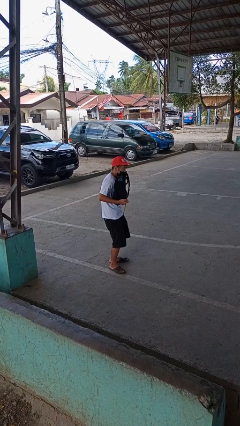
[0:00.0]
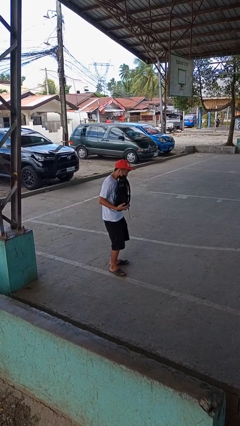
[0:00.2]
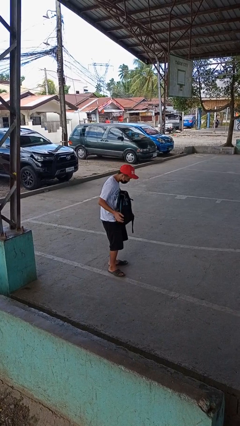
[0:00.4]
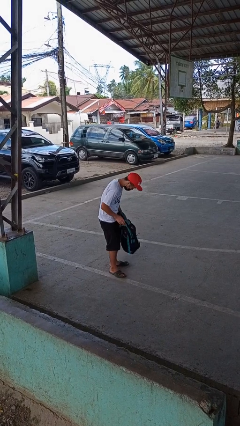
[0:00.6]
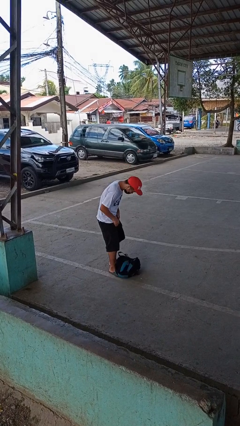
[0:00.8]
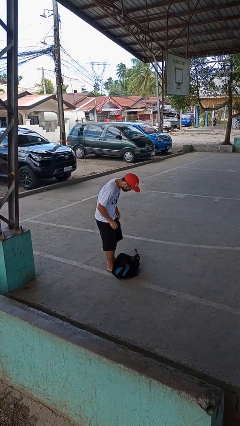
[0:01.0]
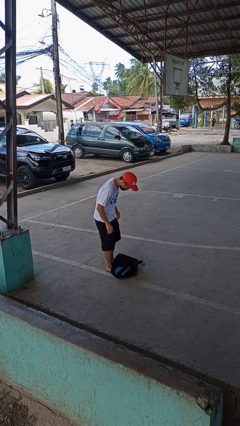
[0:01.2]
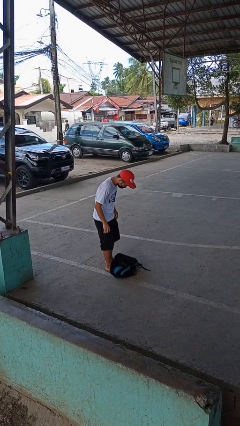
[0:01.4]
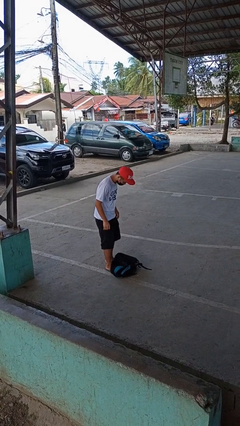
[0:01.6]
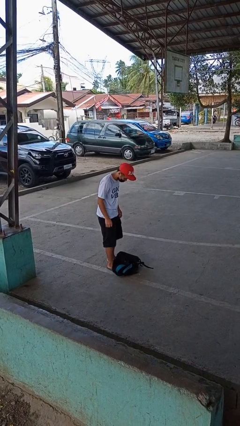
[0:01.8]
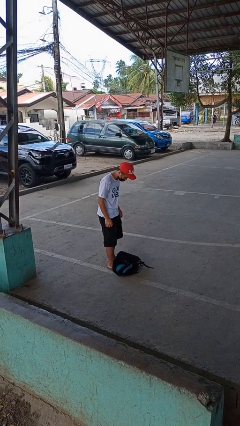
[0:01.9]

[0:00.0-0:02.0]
person drops object

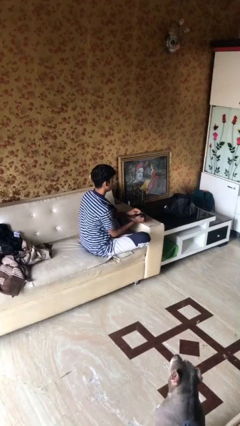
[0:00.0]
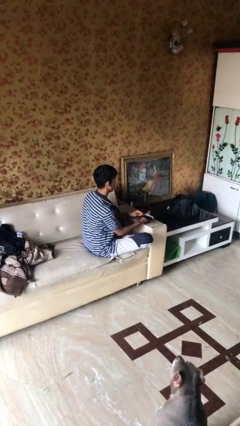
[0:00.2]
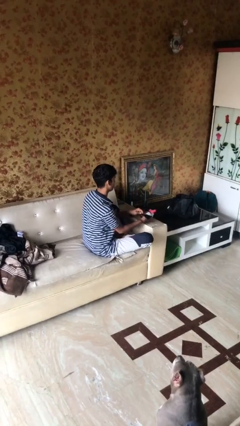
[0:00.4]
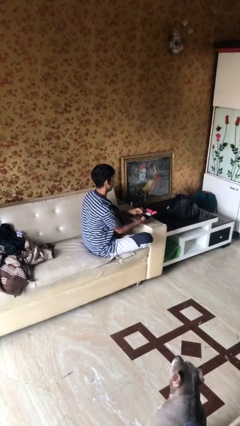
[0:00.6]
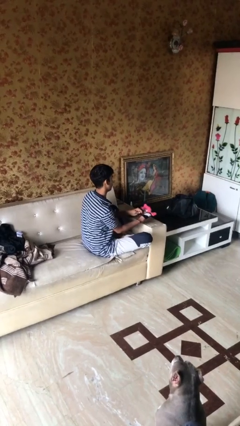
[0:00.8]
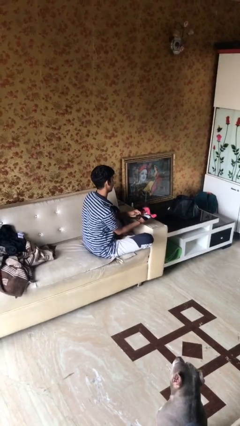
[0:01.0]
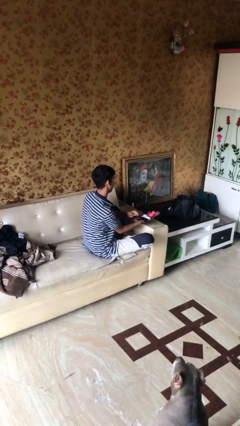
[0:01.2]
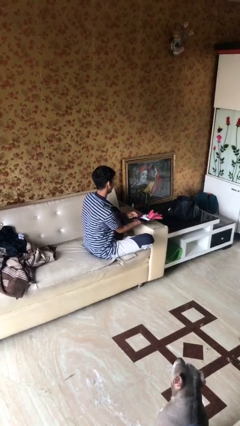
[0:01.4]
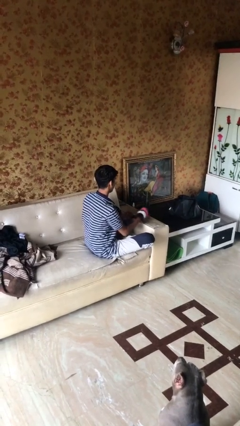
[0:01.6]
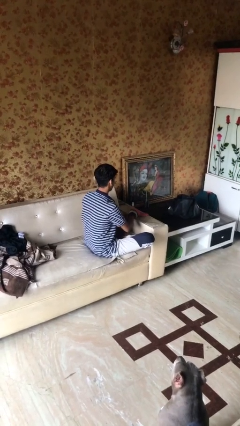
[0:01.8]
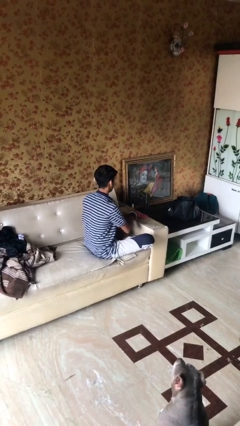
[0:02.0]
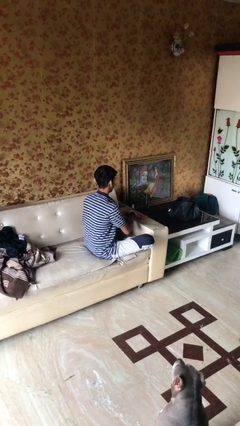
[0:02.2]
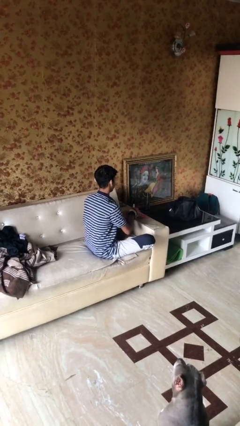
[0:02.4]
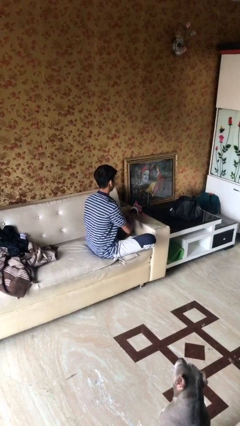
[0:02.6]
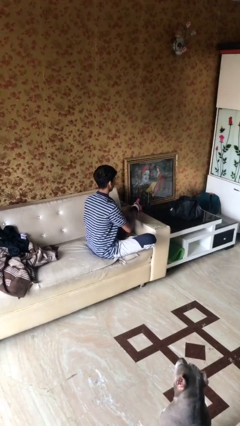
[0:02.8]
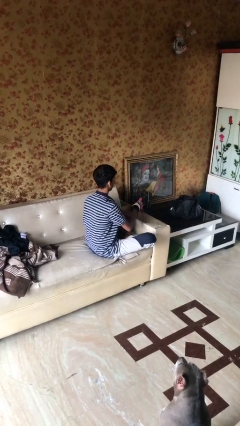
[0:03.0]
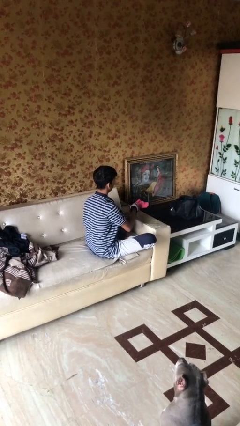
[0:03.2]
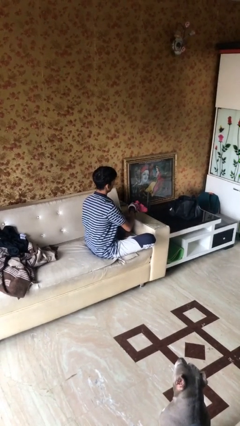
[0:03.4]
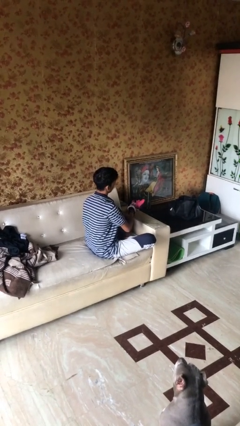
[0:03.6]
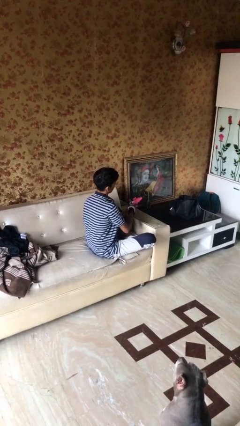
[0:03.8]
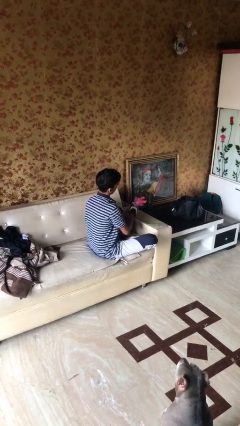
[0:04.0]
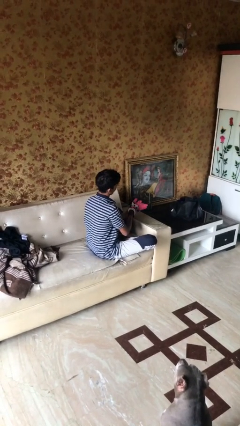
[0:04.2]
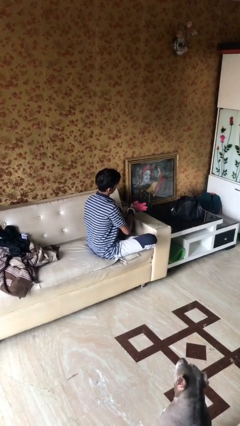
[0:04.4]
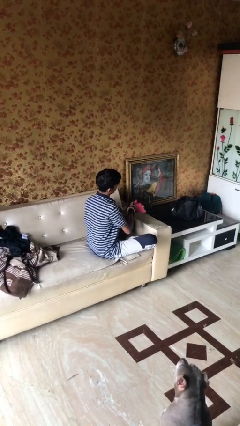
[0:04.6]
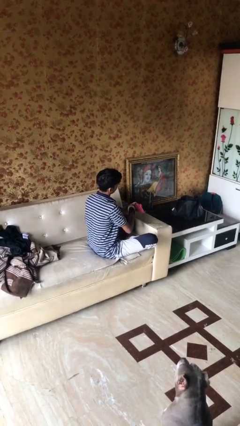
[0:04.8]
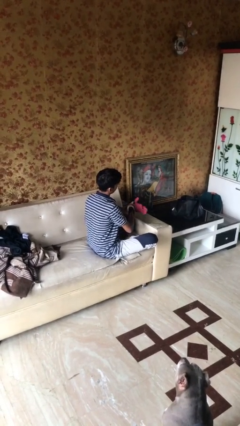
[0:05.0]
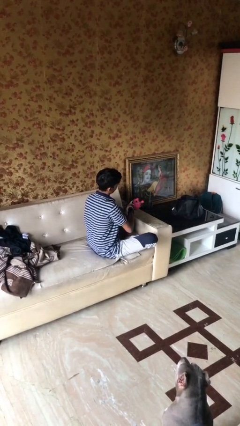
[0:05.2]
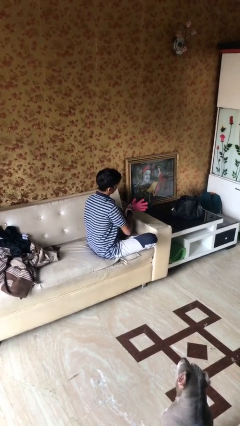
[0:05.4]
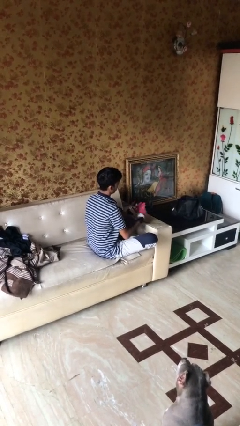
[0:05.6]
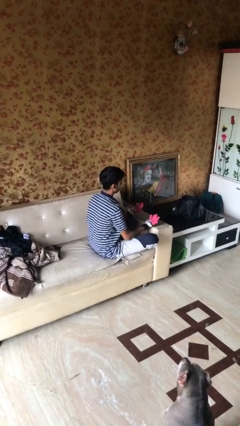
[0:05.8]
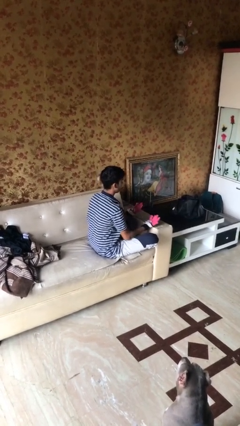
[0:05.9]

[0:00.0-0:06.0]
person puts on gloves

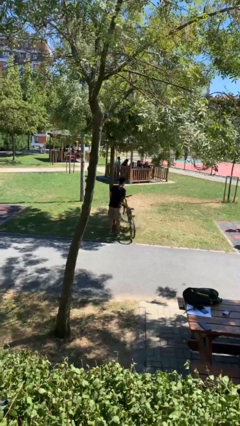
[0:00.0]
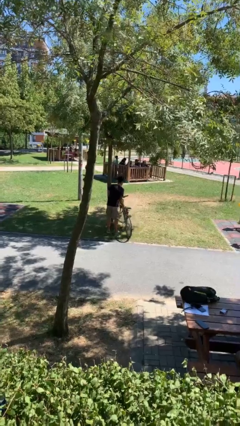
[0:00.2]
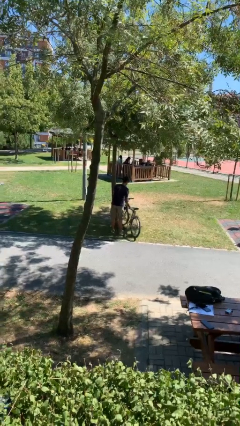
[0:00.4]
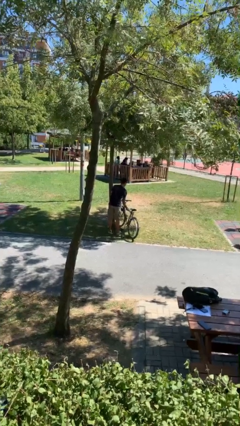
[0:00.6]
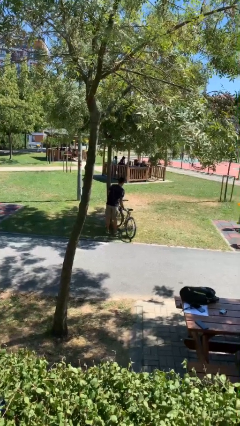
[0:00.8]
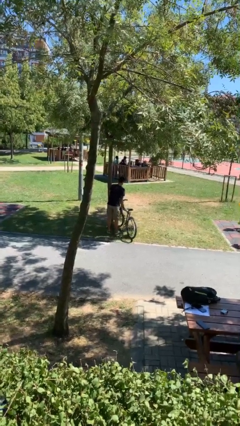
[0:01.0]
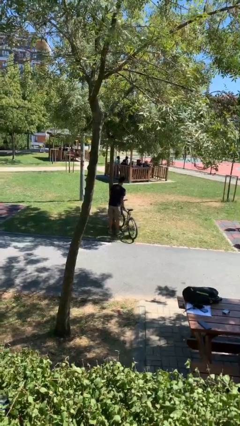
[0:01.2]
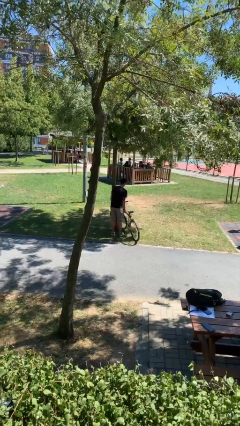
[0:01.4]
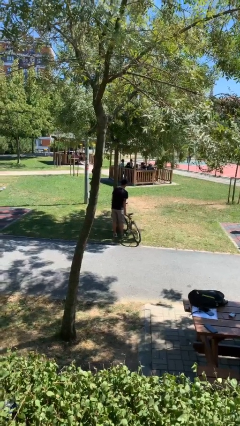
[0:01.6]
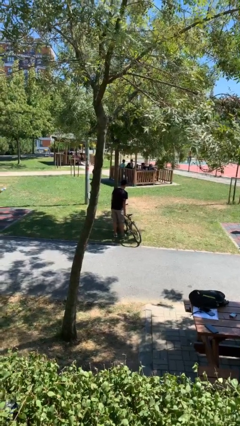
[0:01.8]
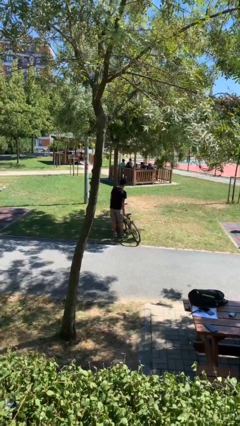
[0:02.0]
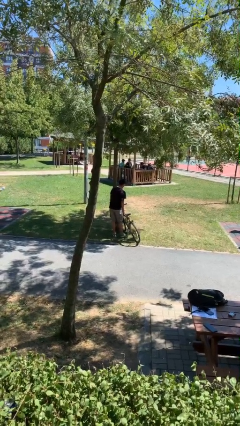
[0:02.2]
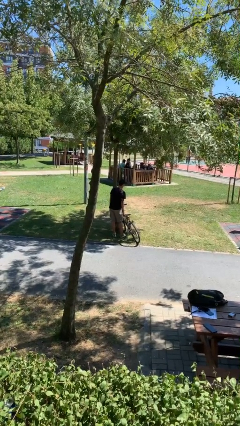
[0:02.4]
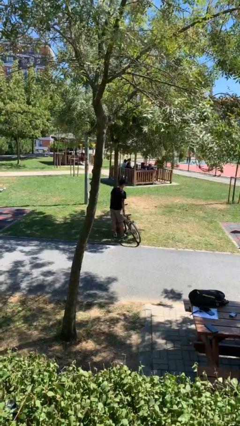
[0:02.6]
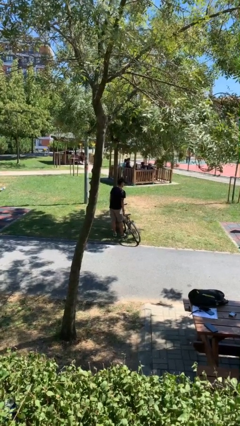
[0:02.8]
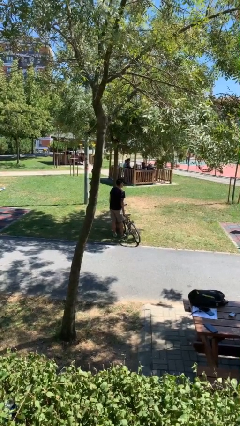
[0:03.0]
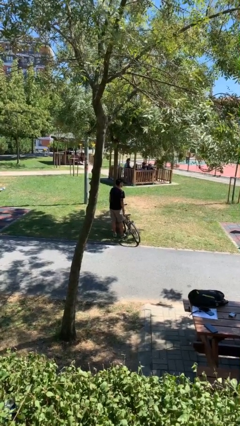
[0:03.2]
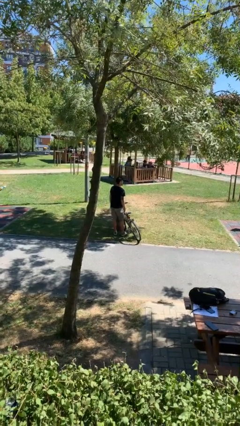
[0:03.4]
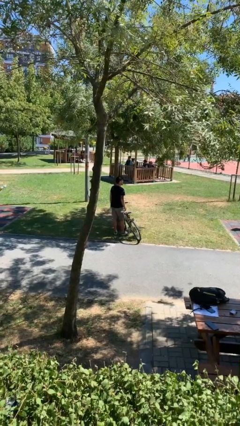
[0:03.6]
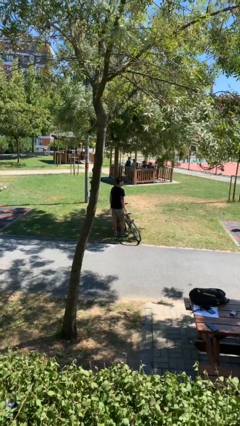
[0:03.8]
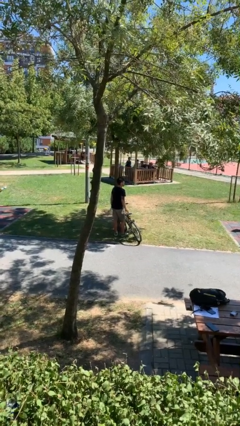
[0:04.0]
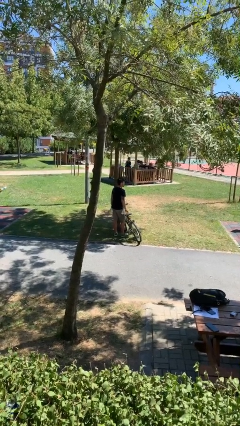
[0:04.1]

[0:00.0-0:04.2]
person puts down object on floor

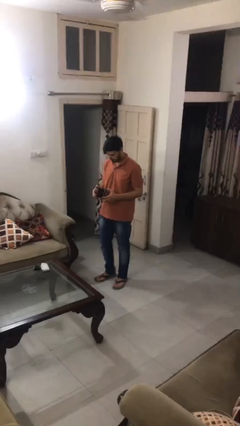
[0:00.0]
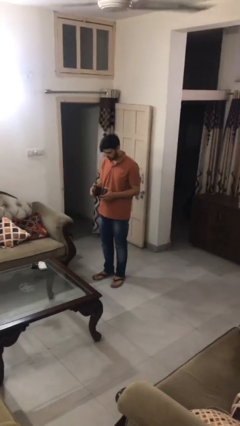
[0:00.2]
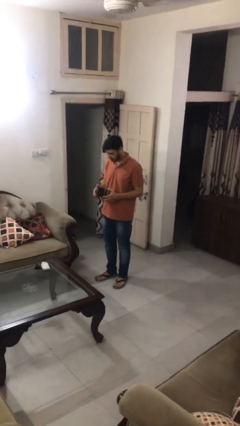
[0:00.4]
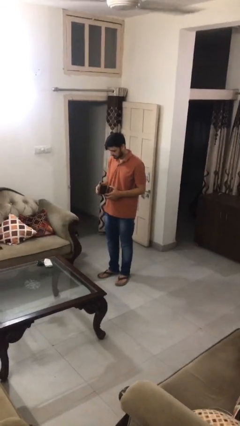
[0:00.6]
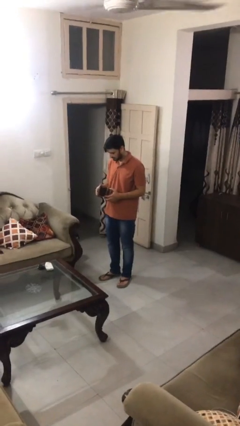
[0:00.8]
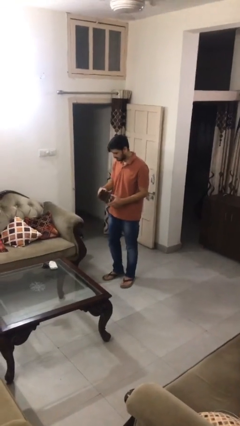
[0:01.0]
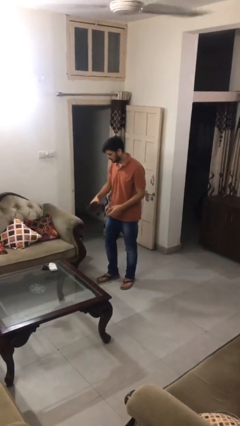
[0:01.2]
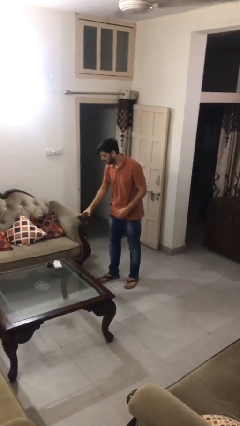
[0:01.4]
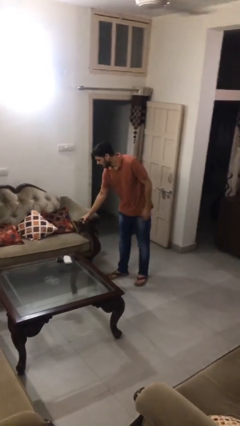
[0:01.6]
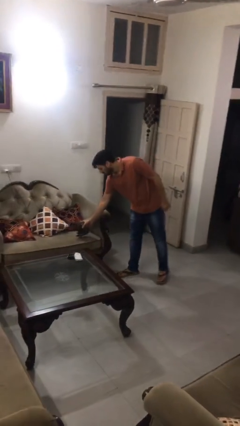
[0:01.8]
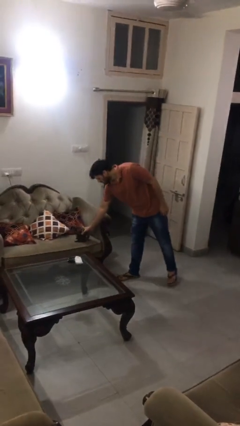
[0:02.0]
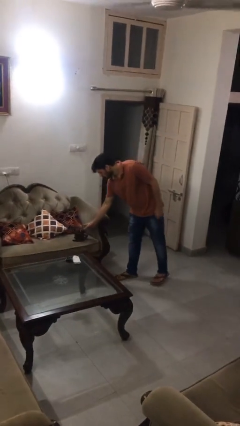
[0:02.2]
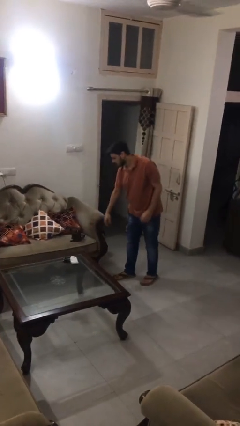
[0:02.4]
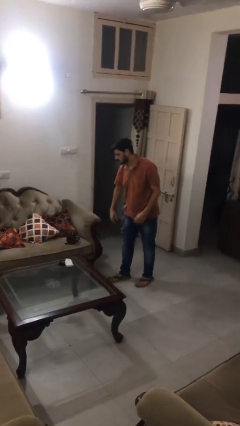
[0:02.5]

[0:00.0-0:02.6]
person puts down object on couch

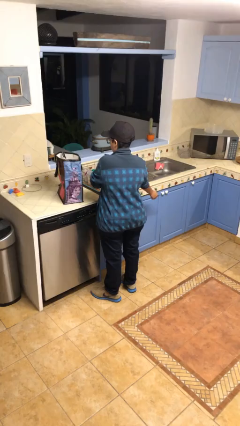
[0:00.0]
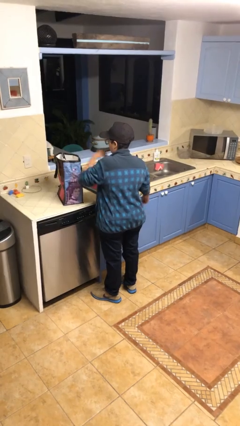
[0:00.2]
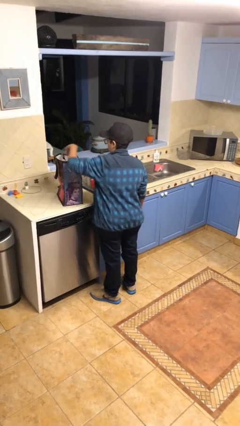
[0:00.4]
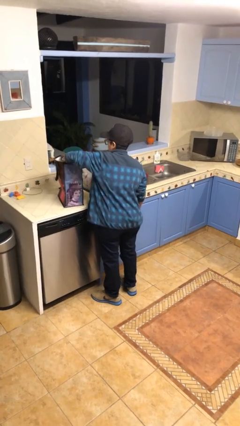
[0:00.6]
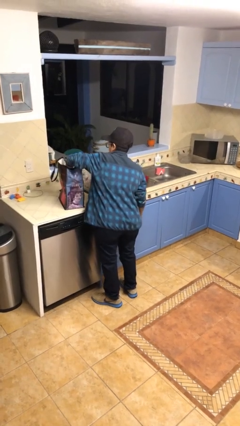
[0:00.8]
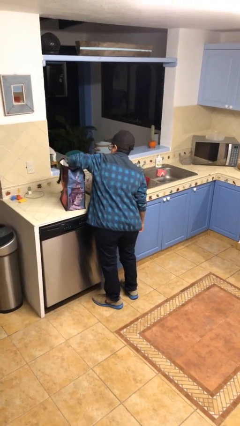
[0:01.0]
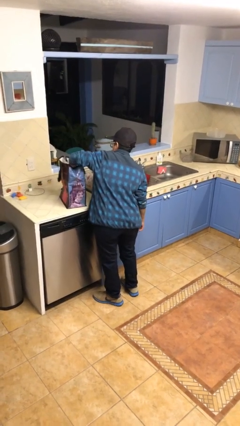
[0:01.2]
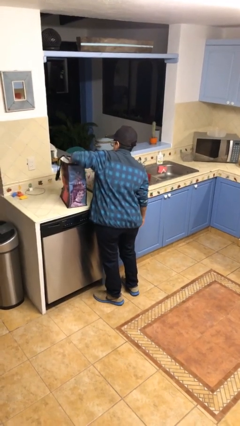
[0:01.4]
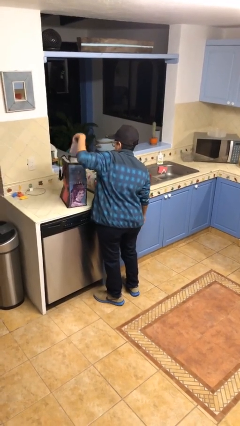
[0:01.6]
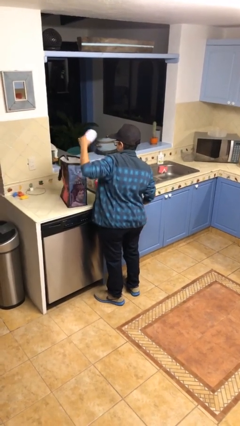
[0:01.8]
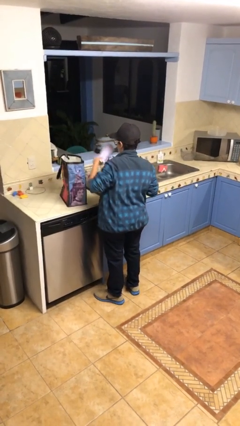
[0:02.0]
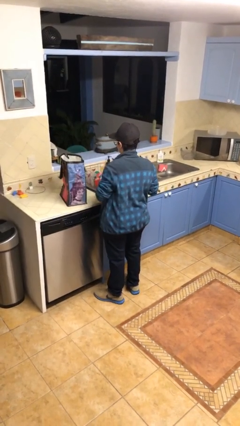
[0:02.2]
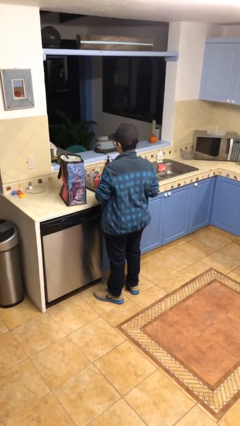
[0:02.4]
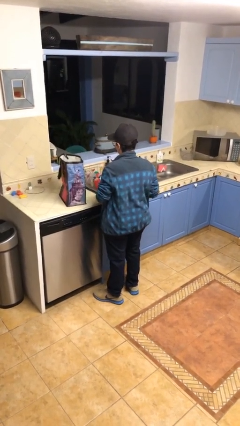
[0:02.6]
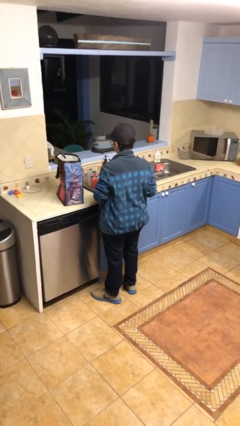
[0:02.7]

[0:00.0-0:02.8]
person takes object from bag
